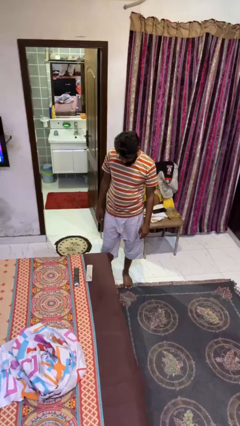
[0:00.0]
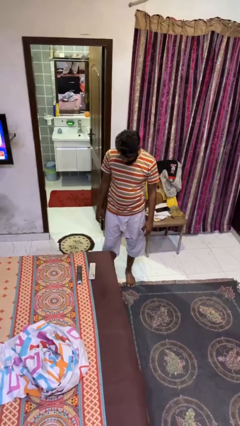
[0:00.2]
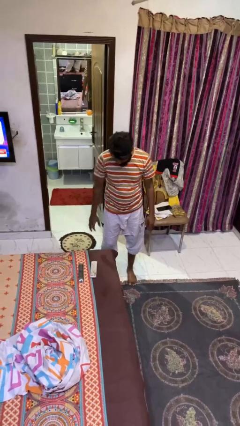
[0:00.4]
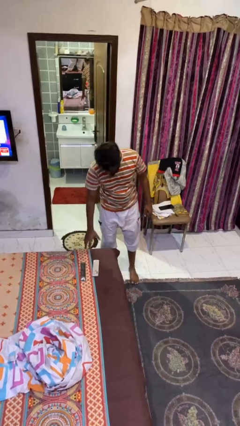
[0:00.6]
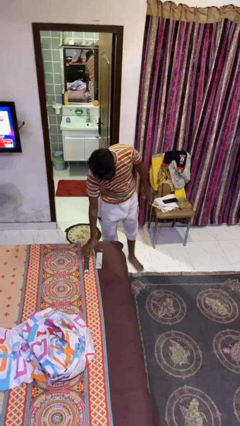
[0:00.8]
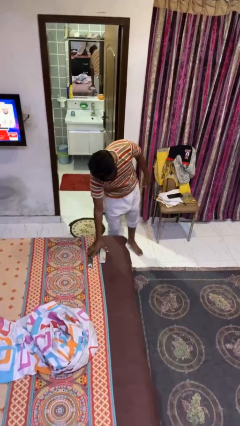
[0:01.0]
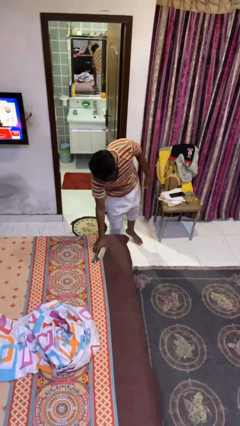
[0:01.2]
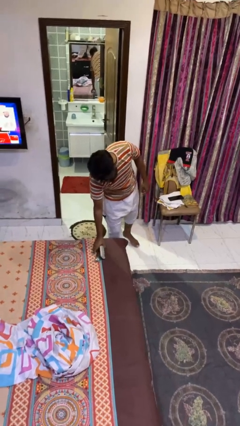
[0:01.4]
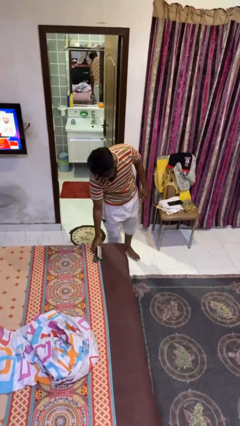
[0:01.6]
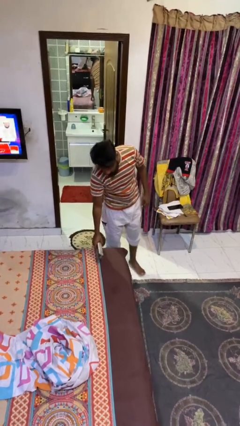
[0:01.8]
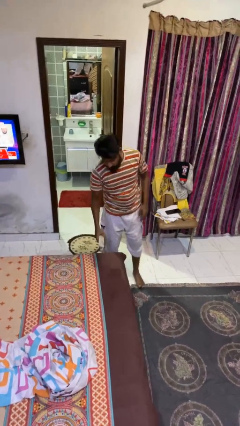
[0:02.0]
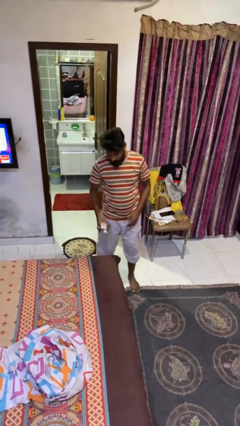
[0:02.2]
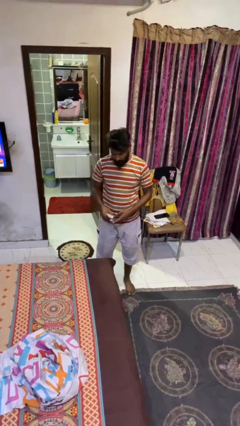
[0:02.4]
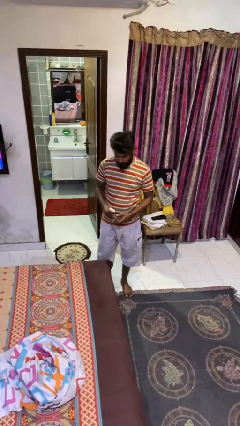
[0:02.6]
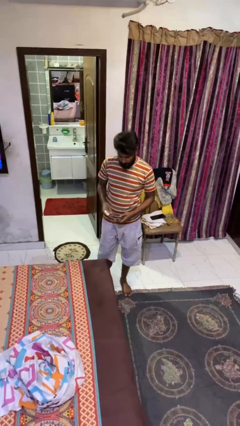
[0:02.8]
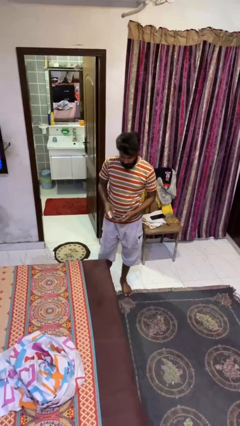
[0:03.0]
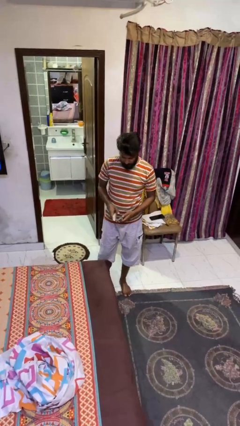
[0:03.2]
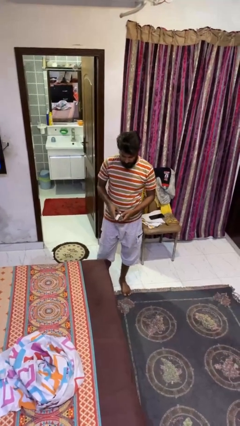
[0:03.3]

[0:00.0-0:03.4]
person picks up object from bed

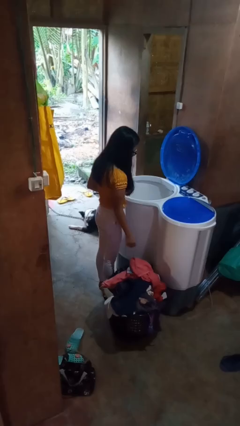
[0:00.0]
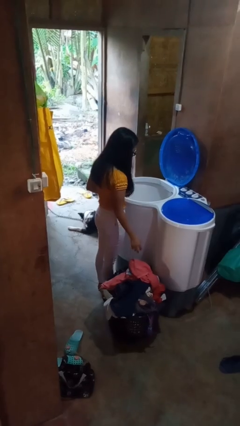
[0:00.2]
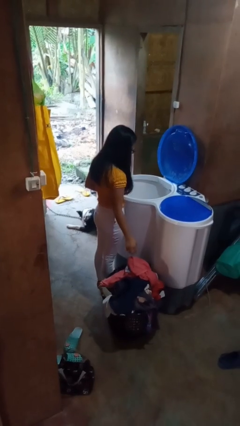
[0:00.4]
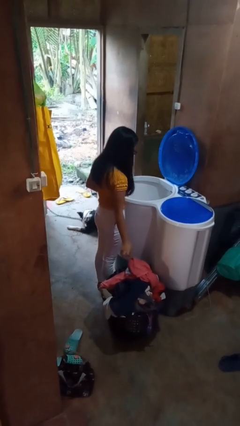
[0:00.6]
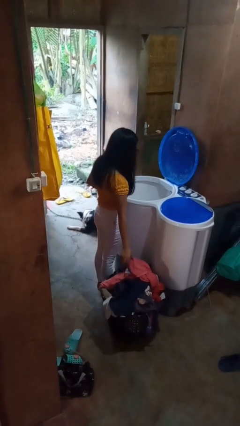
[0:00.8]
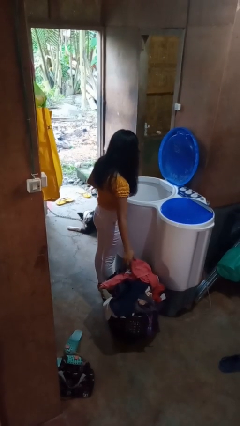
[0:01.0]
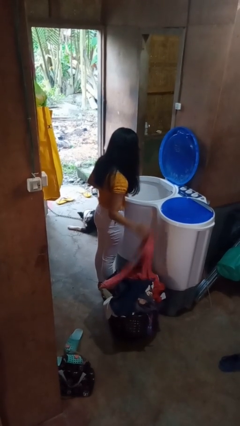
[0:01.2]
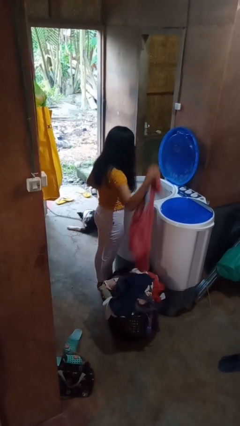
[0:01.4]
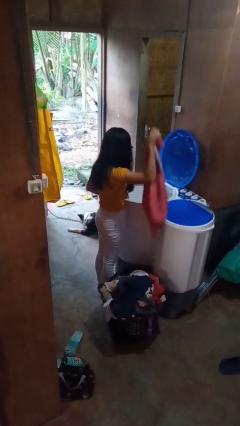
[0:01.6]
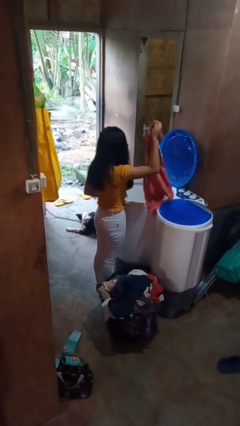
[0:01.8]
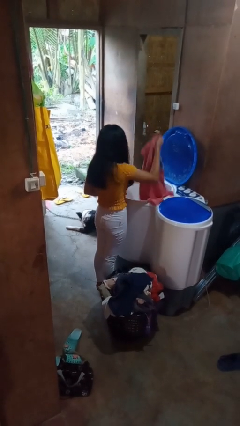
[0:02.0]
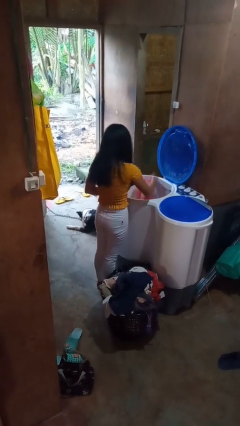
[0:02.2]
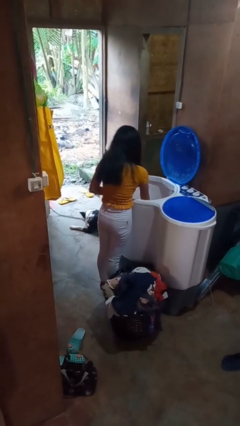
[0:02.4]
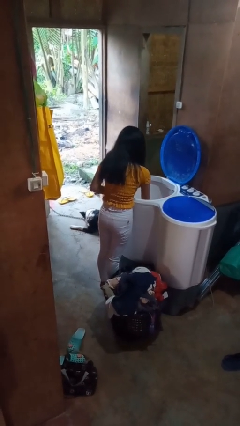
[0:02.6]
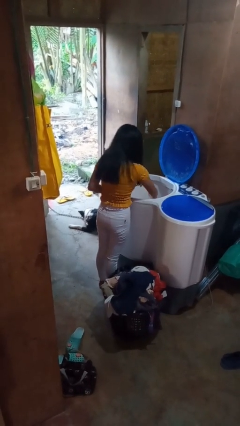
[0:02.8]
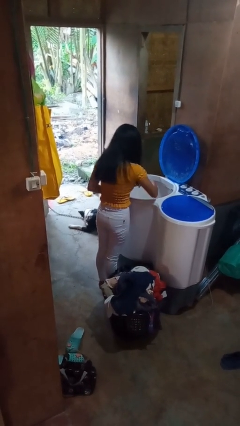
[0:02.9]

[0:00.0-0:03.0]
person loads clotheswasher

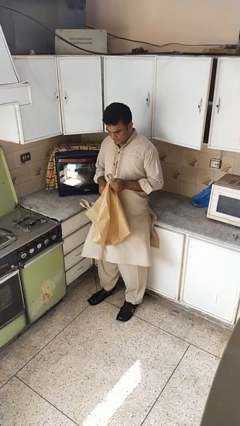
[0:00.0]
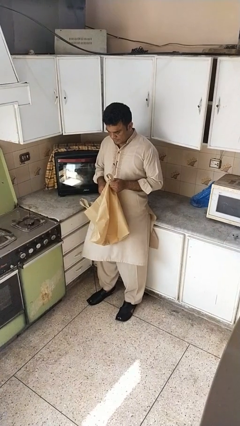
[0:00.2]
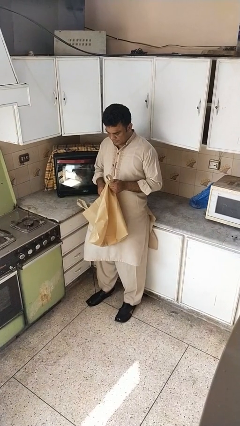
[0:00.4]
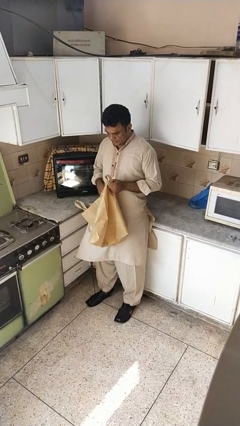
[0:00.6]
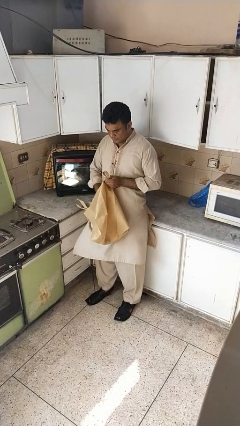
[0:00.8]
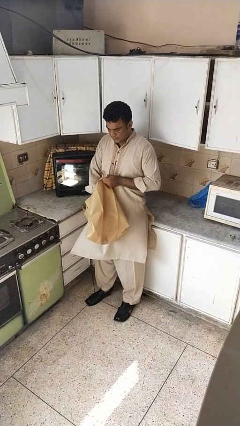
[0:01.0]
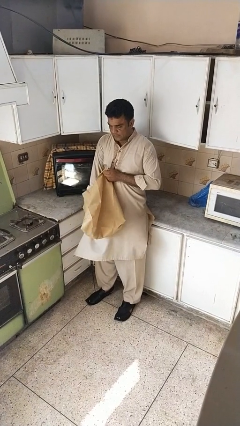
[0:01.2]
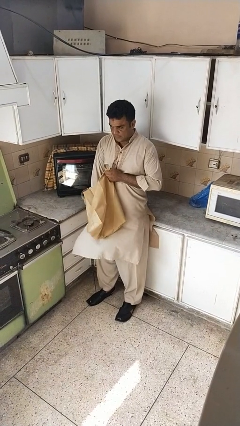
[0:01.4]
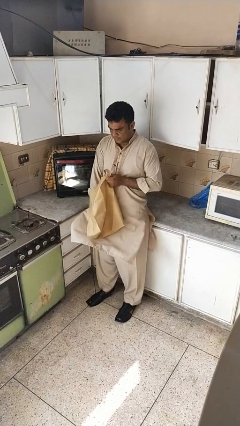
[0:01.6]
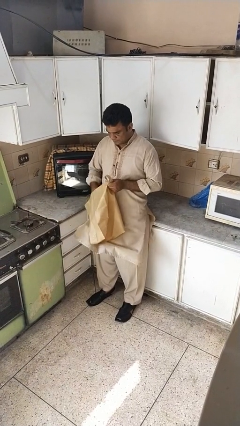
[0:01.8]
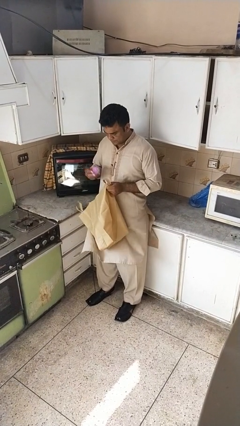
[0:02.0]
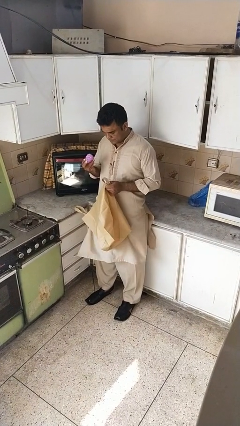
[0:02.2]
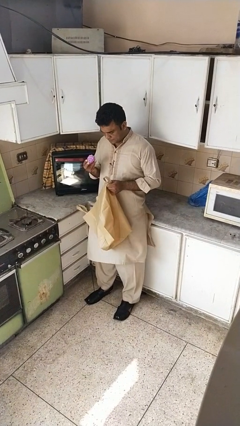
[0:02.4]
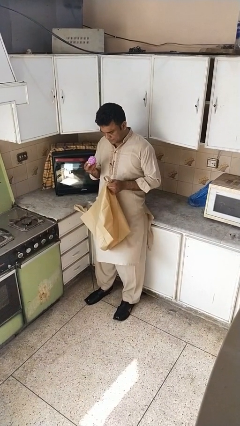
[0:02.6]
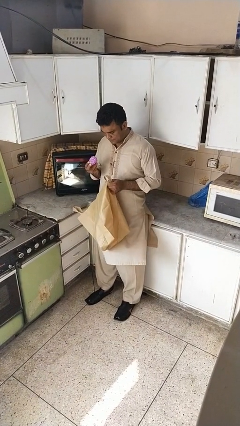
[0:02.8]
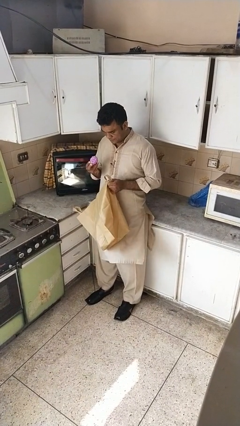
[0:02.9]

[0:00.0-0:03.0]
person takes object from bag

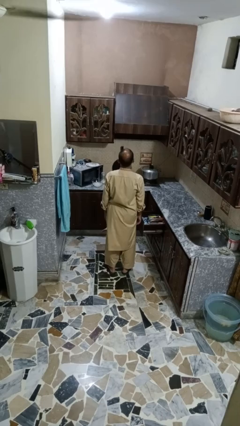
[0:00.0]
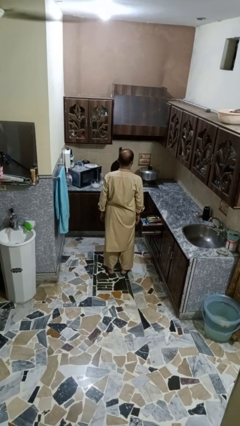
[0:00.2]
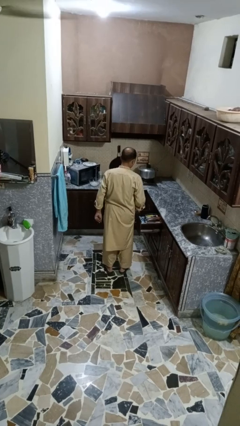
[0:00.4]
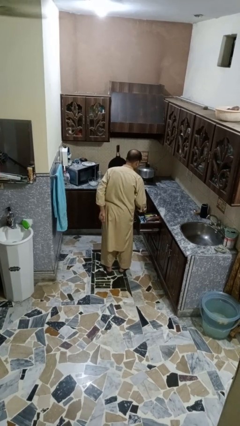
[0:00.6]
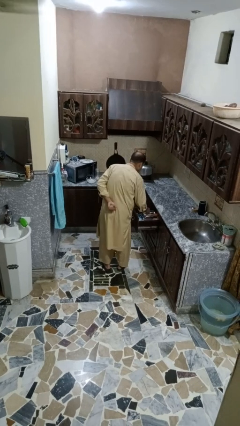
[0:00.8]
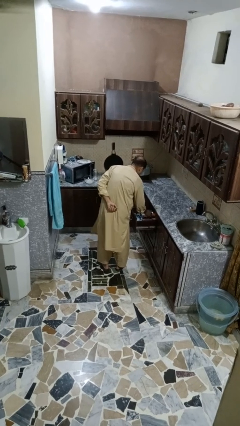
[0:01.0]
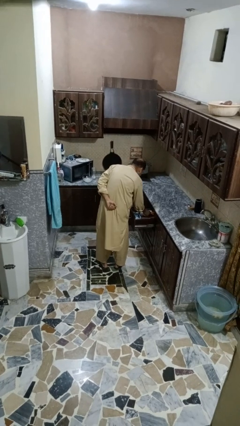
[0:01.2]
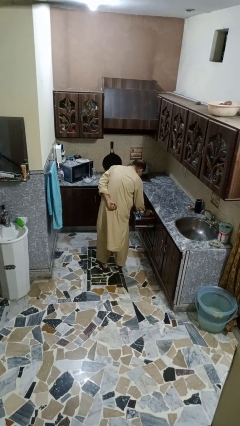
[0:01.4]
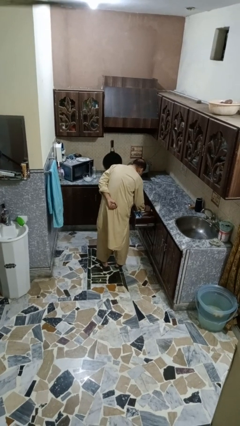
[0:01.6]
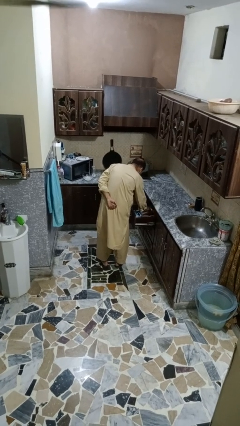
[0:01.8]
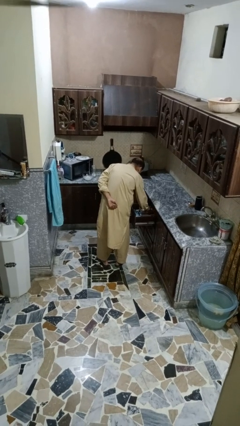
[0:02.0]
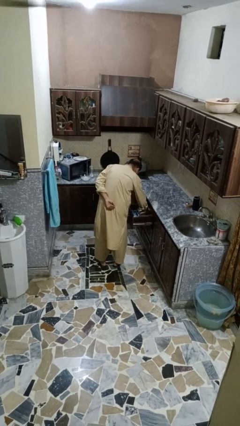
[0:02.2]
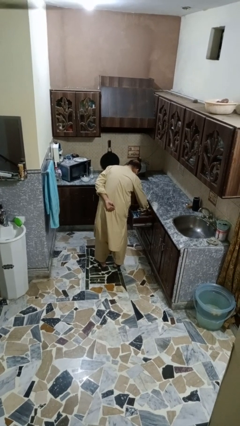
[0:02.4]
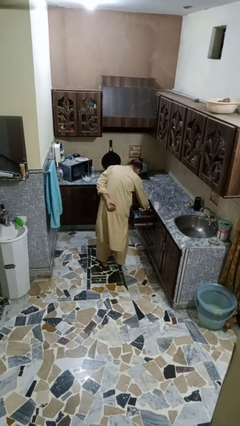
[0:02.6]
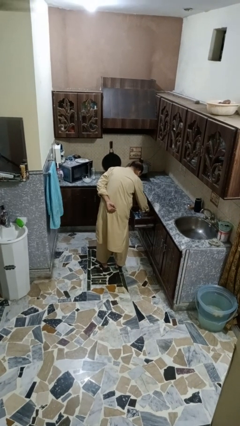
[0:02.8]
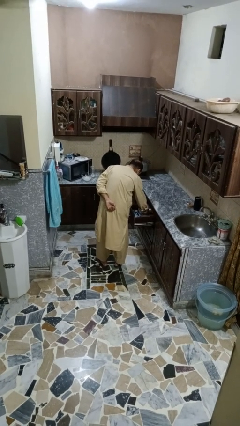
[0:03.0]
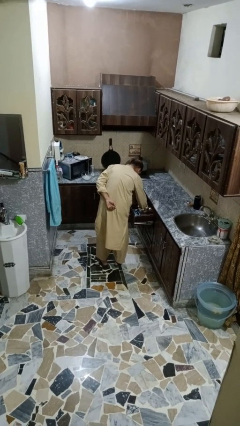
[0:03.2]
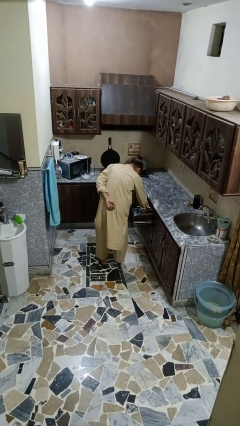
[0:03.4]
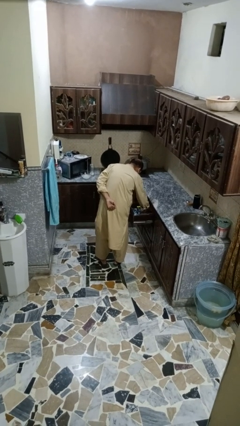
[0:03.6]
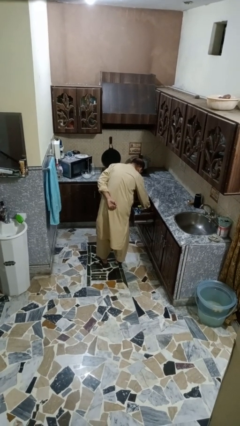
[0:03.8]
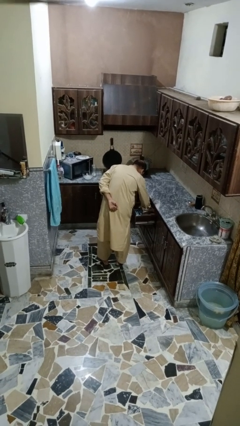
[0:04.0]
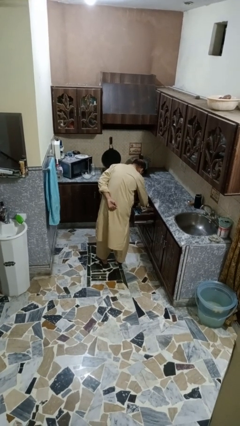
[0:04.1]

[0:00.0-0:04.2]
person searches in kitchen drawer

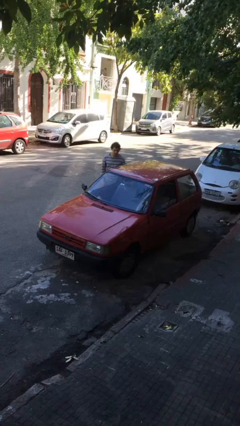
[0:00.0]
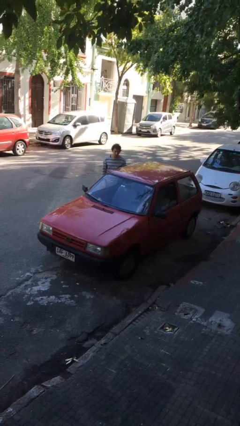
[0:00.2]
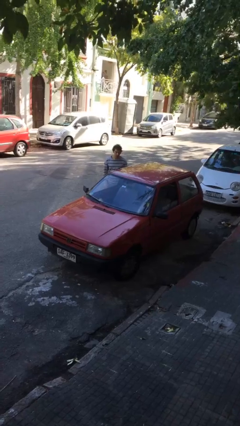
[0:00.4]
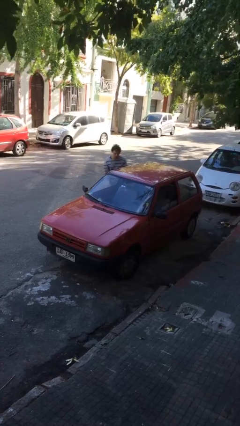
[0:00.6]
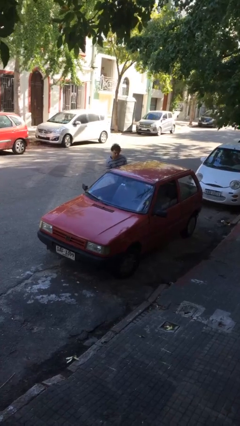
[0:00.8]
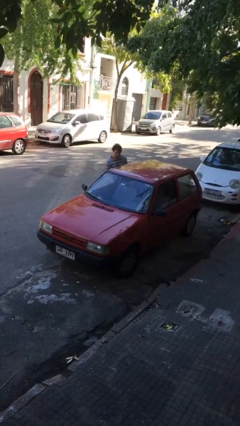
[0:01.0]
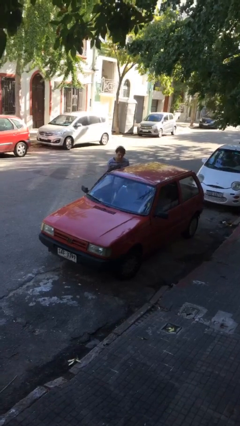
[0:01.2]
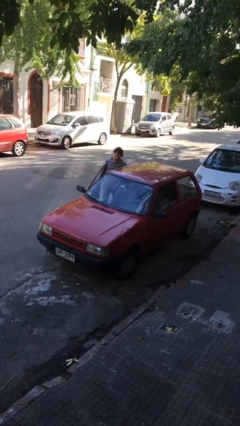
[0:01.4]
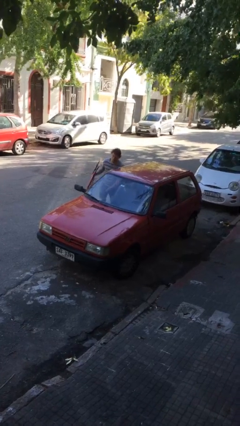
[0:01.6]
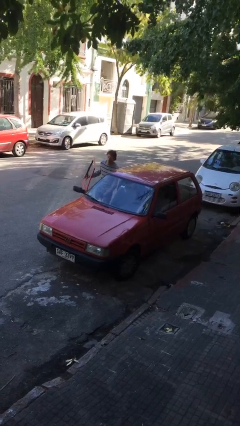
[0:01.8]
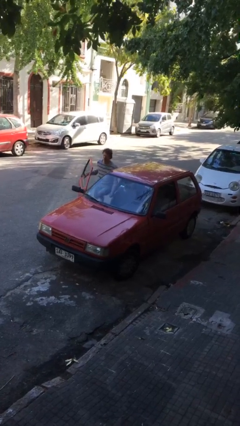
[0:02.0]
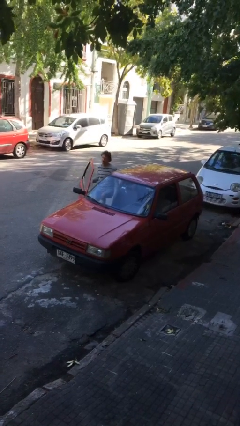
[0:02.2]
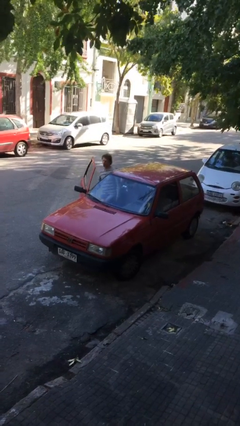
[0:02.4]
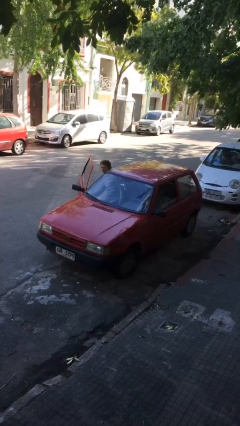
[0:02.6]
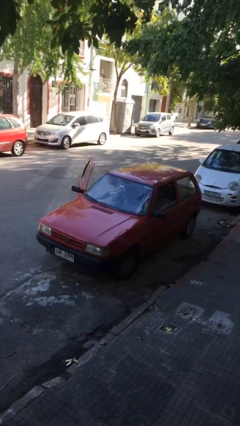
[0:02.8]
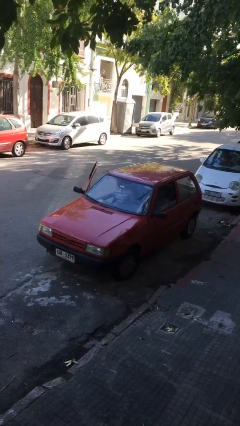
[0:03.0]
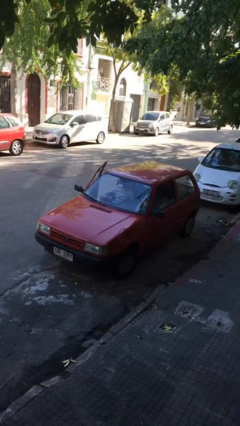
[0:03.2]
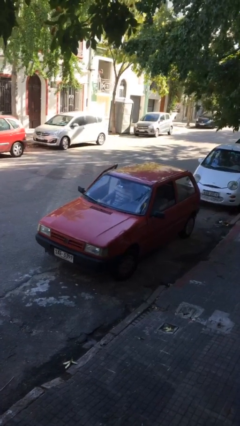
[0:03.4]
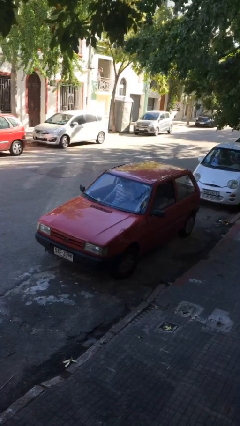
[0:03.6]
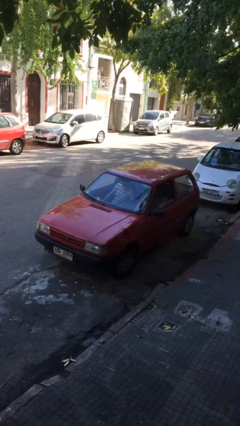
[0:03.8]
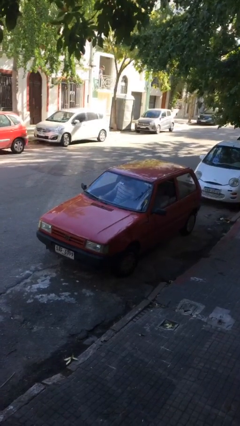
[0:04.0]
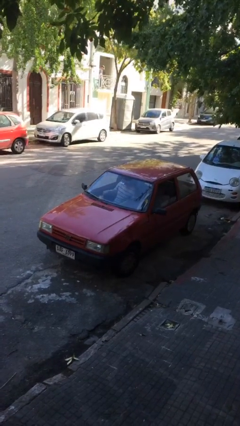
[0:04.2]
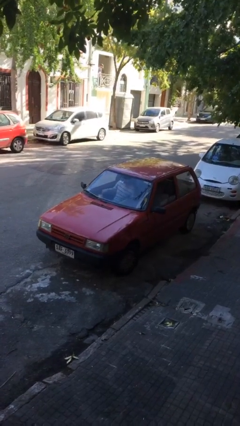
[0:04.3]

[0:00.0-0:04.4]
car picks up person
